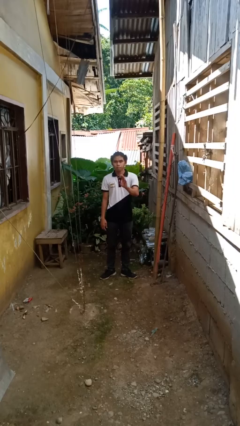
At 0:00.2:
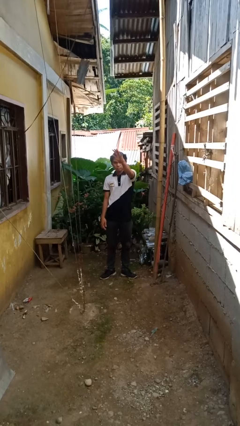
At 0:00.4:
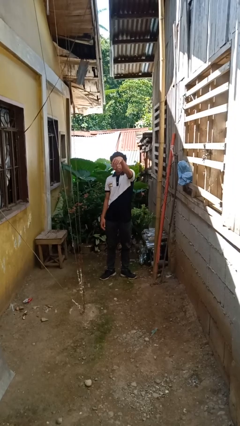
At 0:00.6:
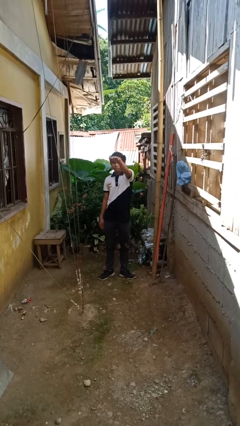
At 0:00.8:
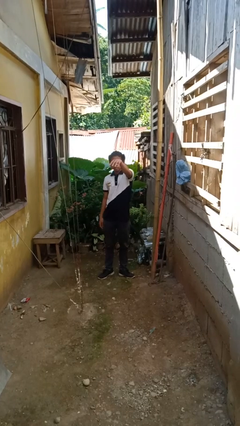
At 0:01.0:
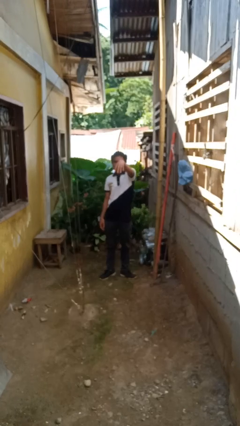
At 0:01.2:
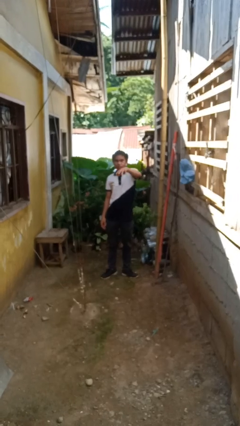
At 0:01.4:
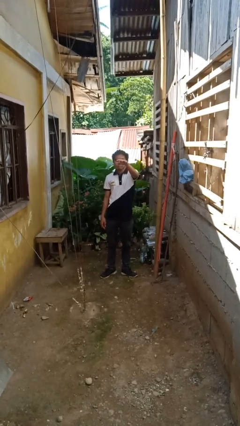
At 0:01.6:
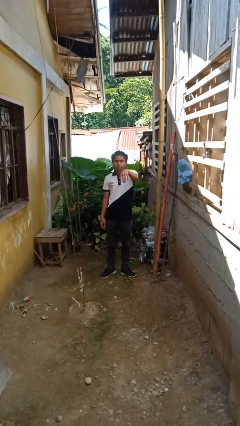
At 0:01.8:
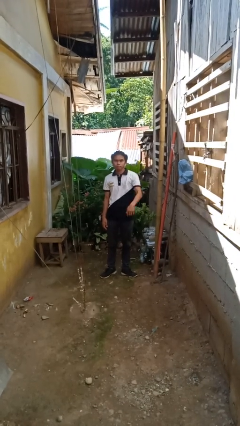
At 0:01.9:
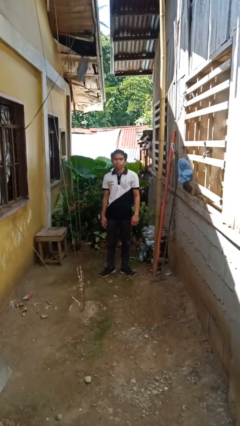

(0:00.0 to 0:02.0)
person gestures come here

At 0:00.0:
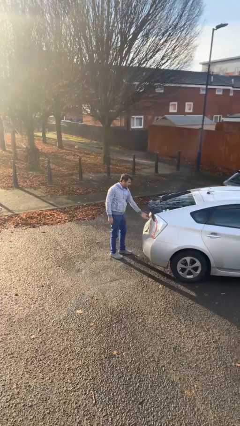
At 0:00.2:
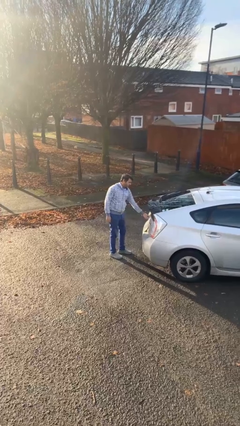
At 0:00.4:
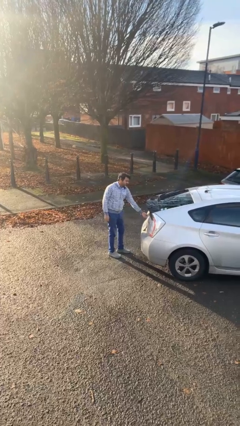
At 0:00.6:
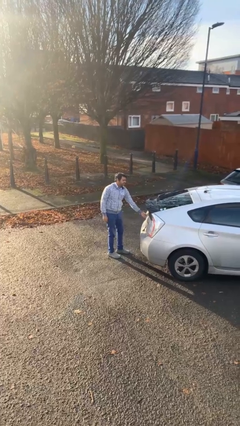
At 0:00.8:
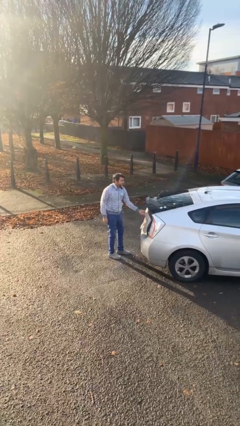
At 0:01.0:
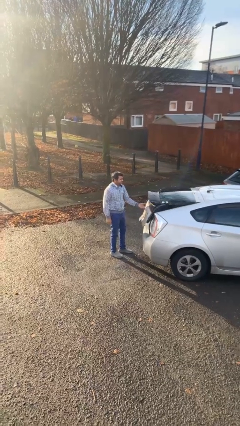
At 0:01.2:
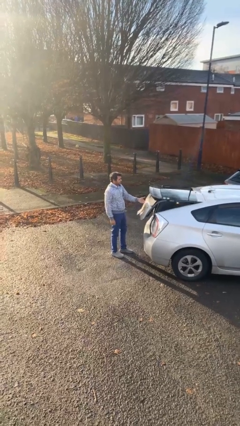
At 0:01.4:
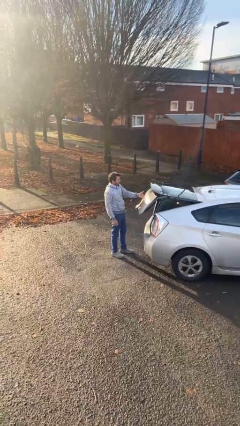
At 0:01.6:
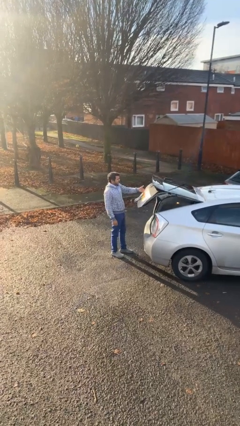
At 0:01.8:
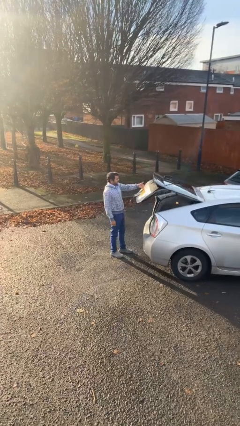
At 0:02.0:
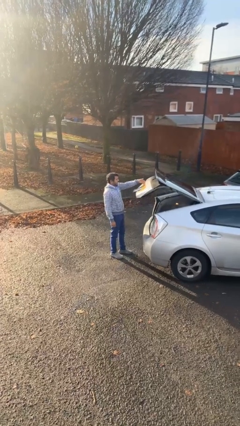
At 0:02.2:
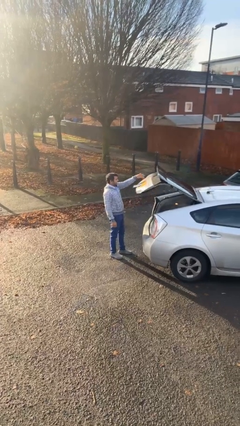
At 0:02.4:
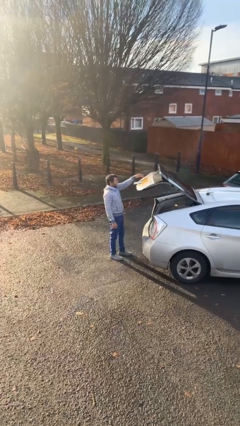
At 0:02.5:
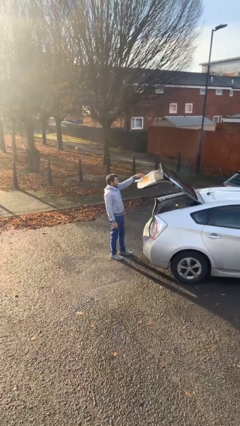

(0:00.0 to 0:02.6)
person opens car trunk

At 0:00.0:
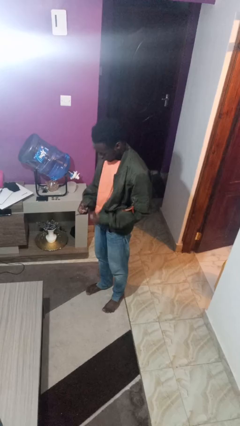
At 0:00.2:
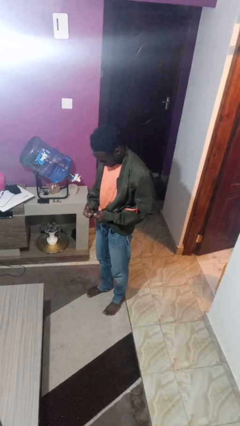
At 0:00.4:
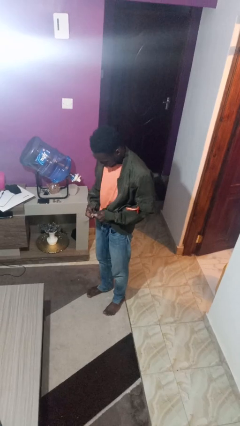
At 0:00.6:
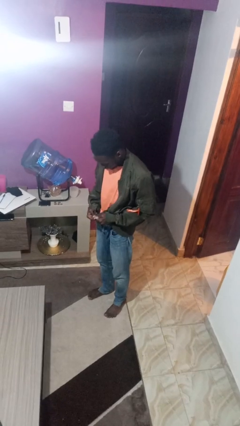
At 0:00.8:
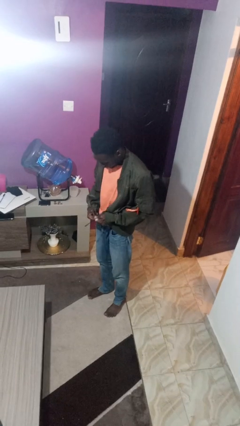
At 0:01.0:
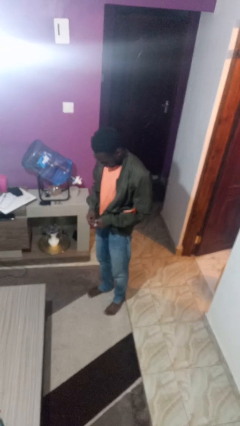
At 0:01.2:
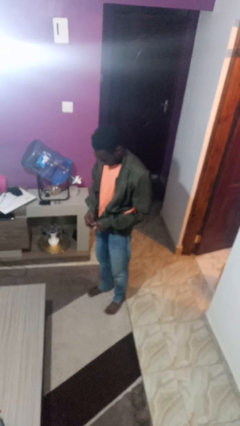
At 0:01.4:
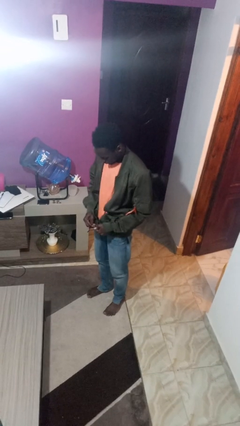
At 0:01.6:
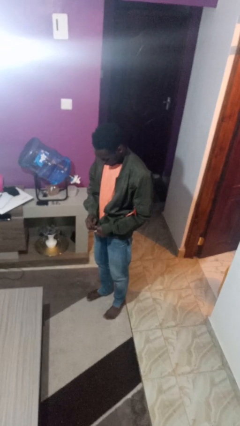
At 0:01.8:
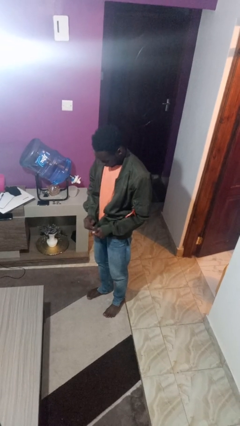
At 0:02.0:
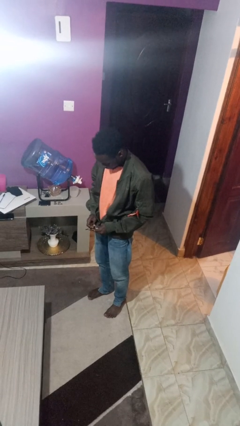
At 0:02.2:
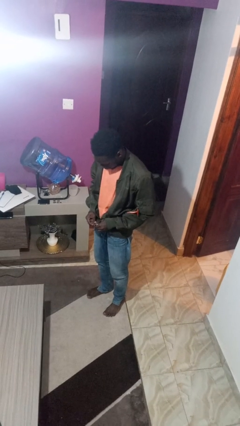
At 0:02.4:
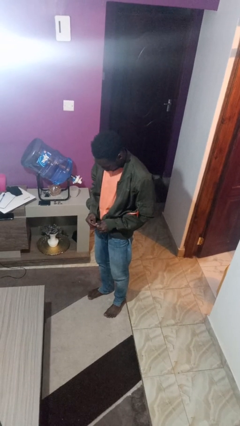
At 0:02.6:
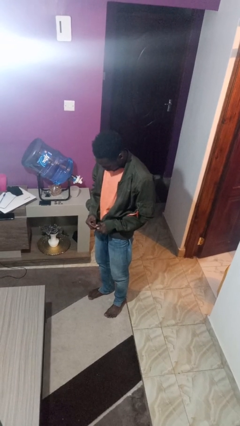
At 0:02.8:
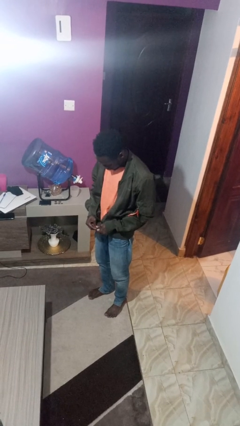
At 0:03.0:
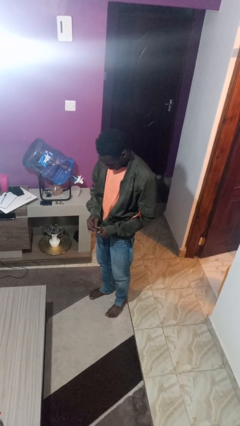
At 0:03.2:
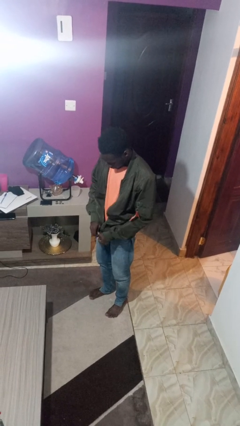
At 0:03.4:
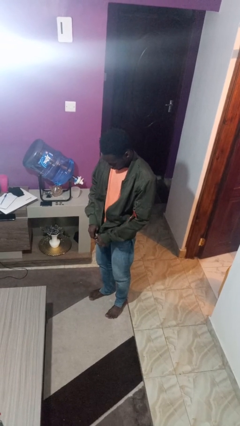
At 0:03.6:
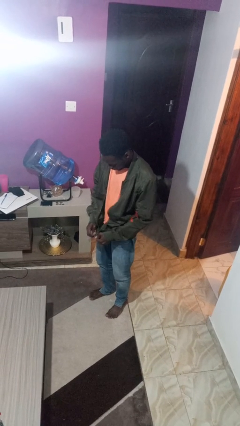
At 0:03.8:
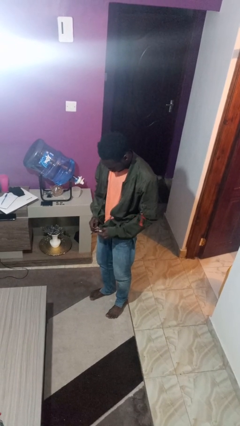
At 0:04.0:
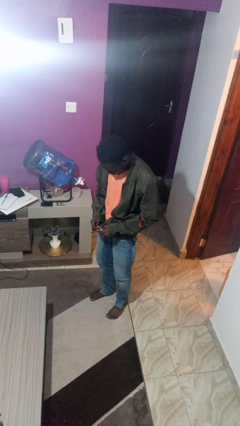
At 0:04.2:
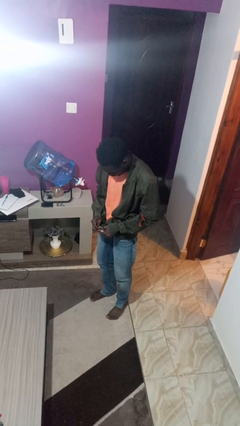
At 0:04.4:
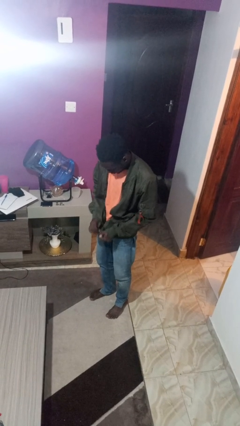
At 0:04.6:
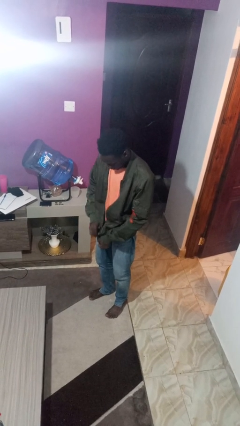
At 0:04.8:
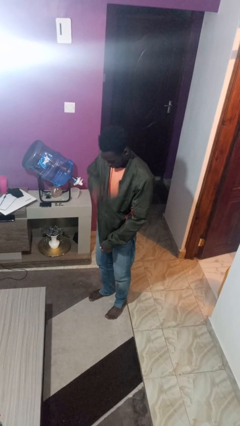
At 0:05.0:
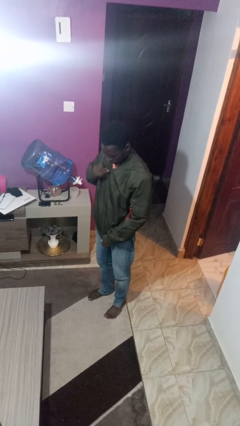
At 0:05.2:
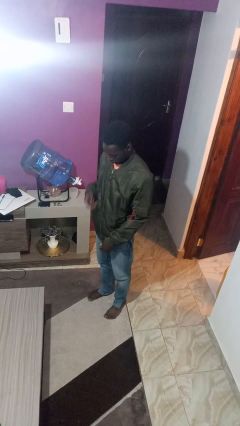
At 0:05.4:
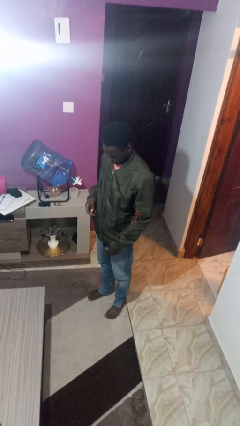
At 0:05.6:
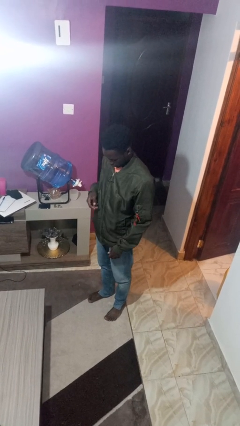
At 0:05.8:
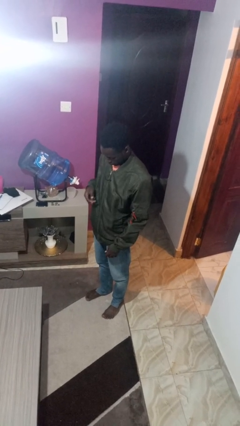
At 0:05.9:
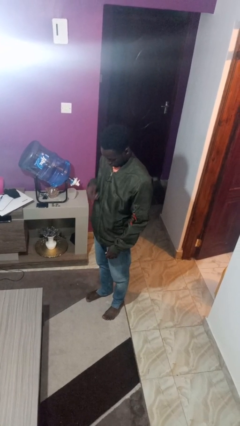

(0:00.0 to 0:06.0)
person zips up jacket

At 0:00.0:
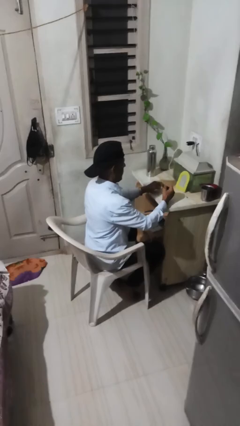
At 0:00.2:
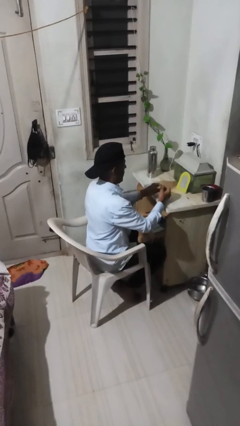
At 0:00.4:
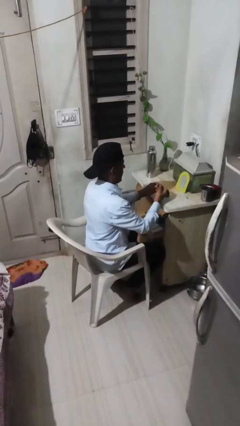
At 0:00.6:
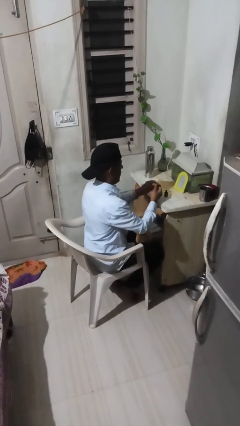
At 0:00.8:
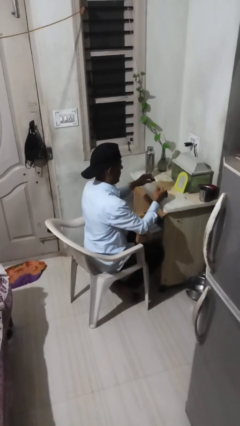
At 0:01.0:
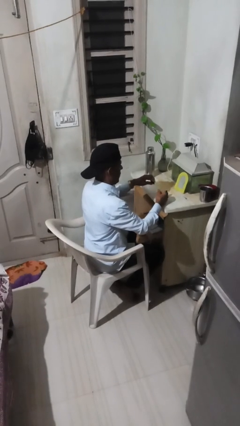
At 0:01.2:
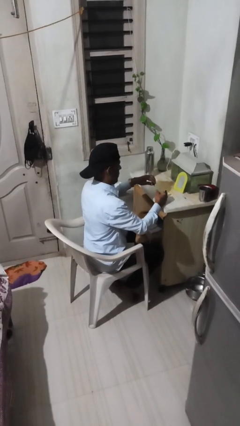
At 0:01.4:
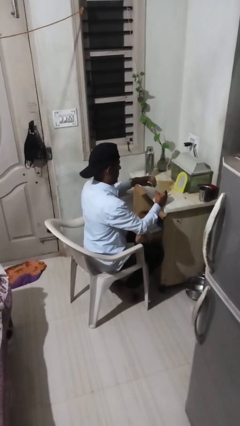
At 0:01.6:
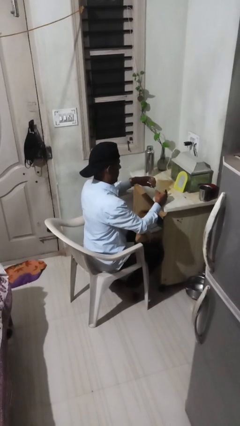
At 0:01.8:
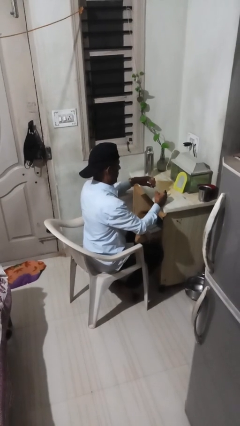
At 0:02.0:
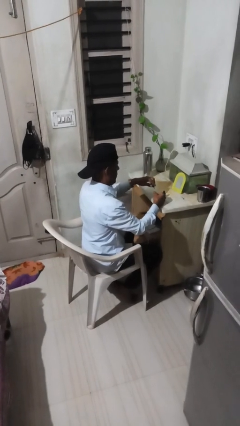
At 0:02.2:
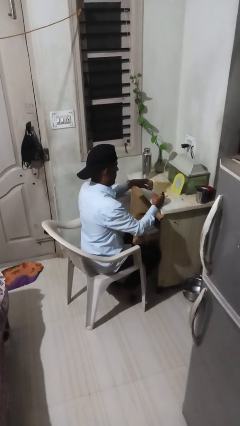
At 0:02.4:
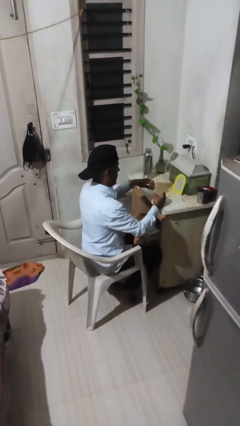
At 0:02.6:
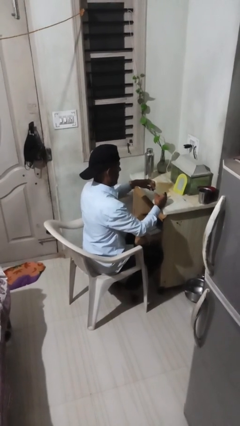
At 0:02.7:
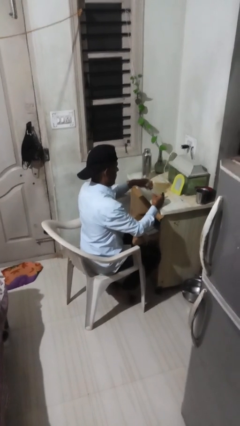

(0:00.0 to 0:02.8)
person paints fingernails

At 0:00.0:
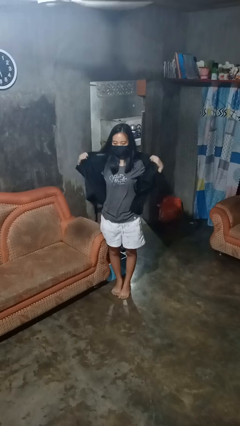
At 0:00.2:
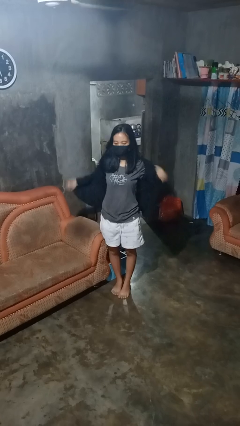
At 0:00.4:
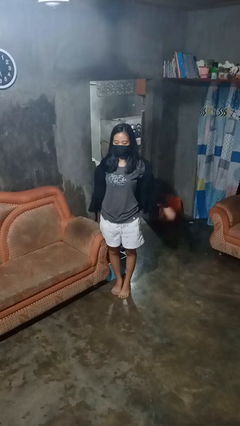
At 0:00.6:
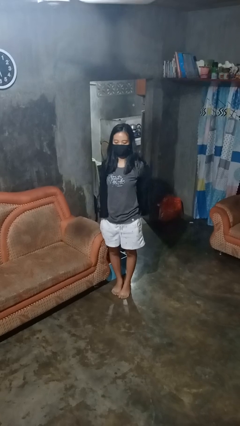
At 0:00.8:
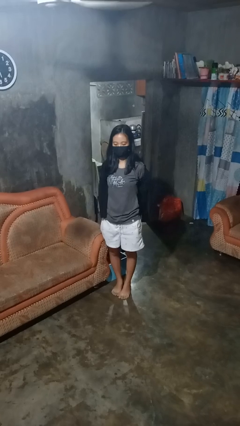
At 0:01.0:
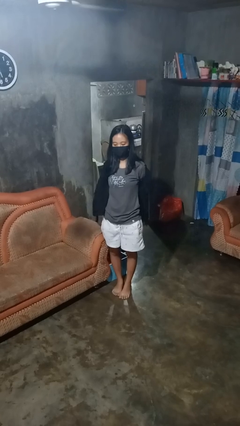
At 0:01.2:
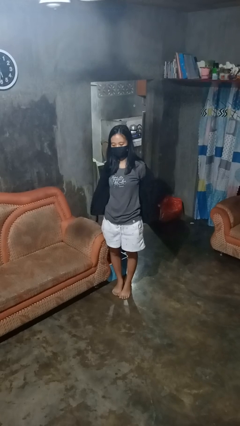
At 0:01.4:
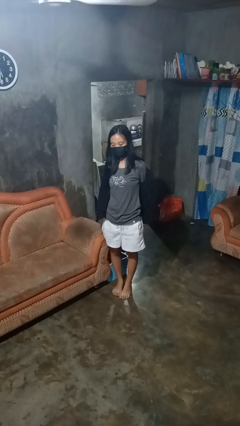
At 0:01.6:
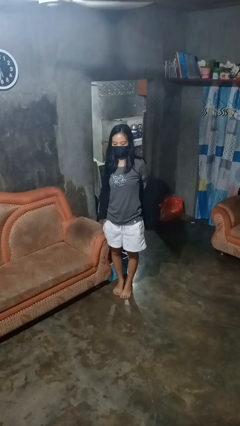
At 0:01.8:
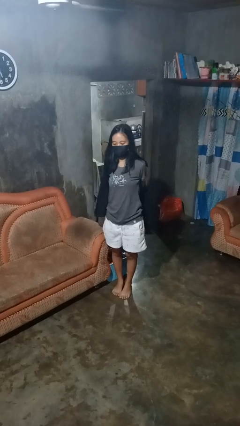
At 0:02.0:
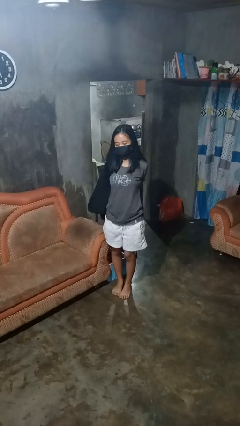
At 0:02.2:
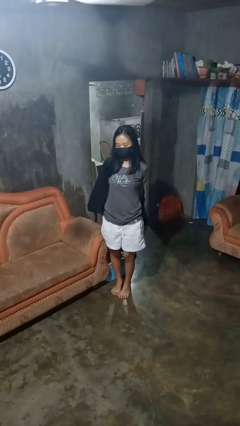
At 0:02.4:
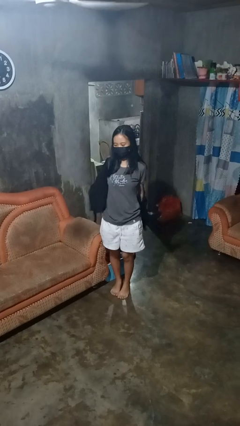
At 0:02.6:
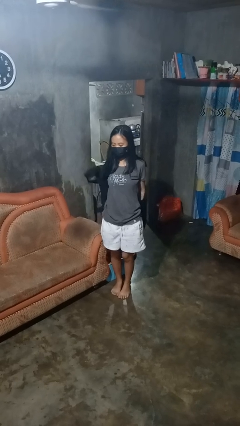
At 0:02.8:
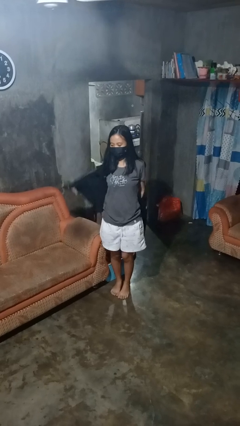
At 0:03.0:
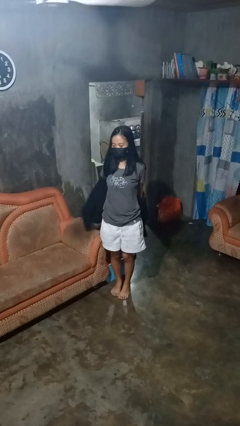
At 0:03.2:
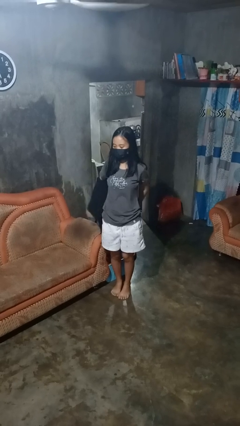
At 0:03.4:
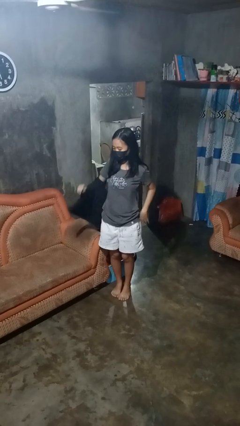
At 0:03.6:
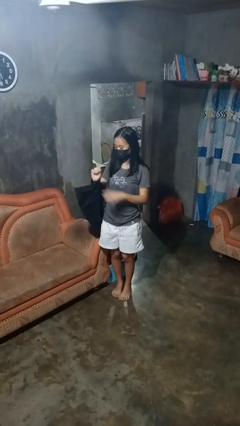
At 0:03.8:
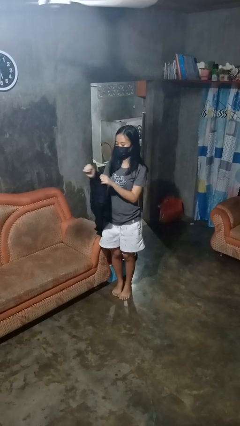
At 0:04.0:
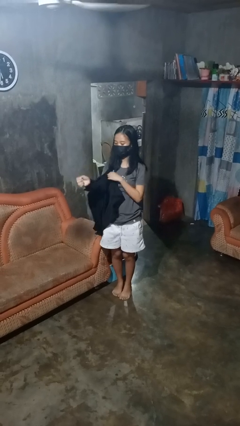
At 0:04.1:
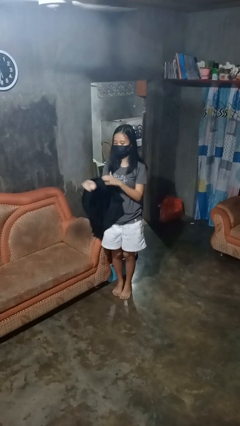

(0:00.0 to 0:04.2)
person takes off shirt
